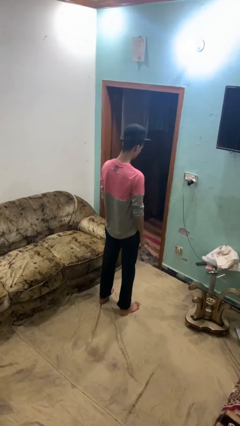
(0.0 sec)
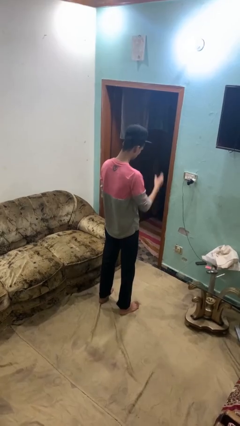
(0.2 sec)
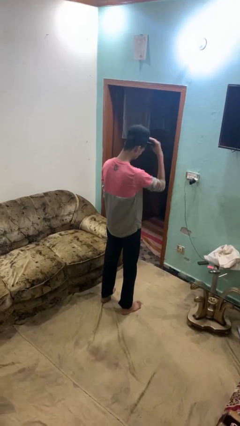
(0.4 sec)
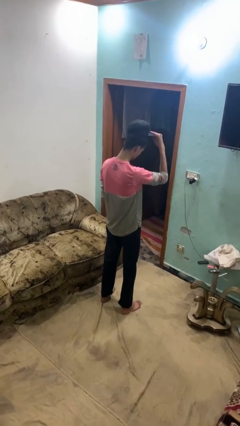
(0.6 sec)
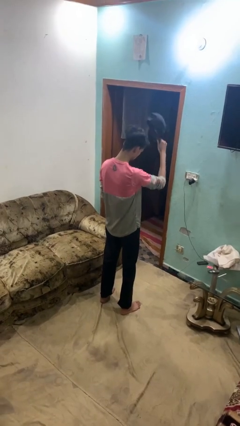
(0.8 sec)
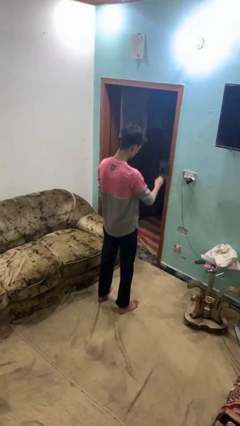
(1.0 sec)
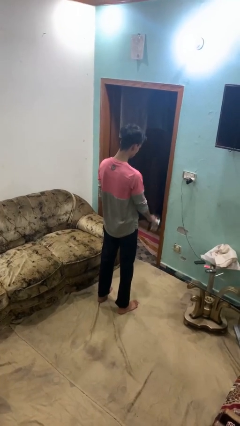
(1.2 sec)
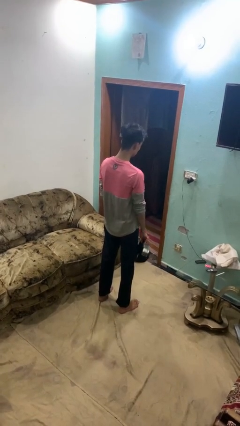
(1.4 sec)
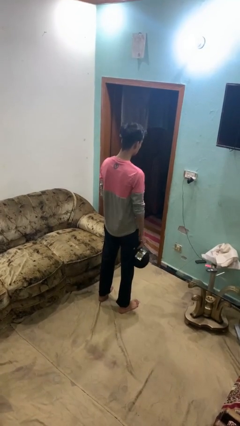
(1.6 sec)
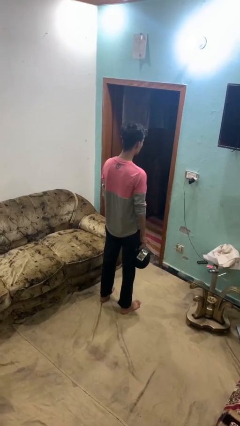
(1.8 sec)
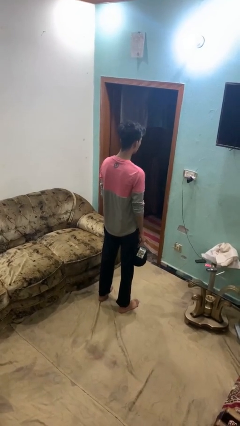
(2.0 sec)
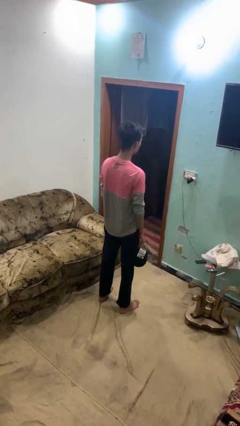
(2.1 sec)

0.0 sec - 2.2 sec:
person takes off hat

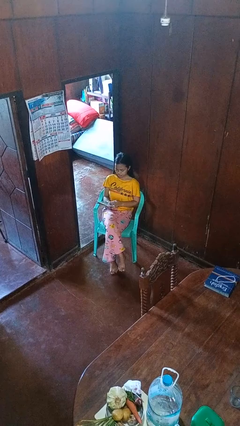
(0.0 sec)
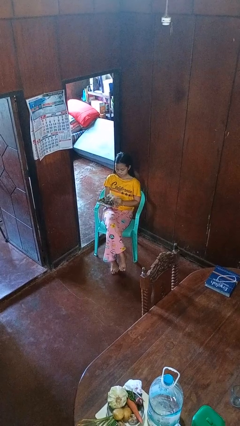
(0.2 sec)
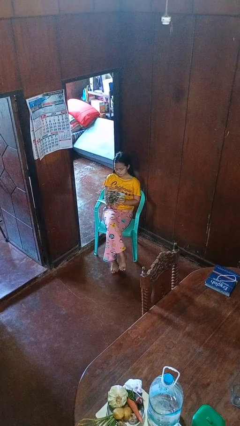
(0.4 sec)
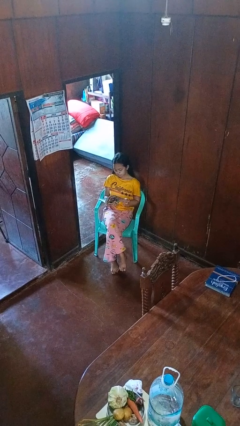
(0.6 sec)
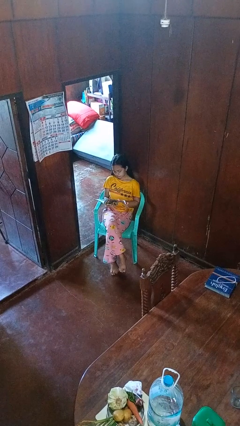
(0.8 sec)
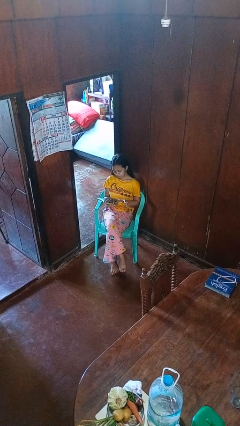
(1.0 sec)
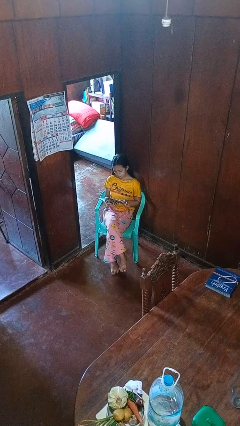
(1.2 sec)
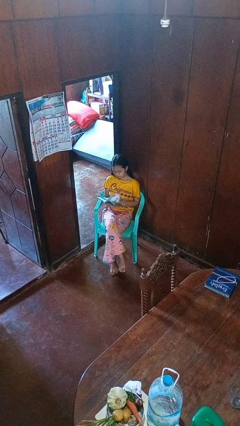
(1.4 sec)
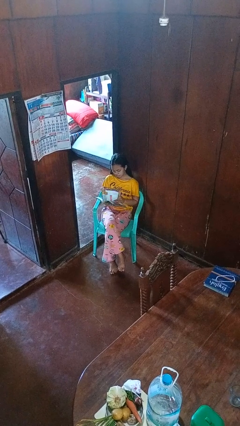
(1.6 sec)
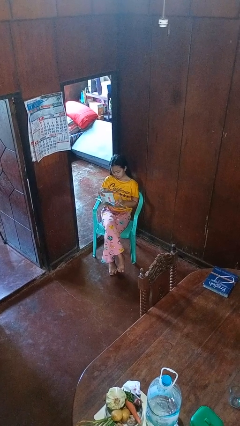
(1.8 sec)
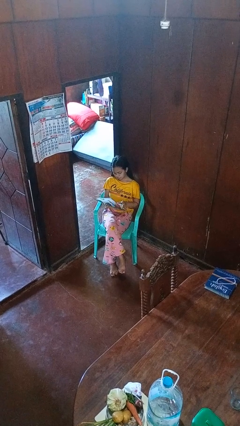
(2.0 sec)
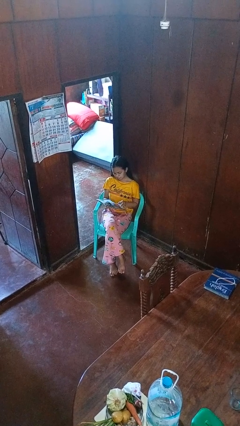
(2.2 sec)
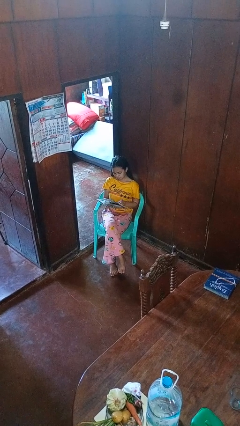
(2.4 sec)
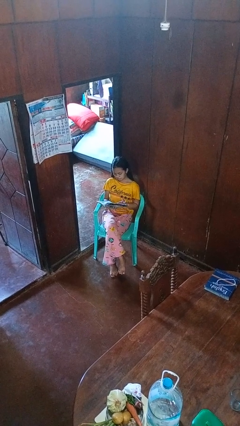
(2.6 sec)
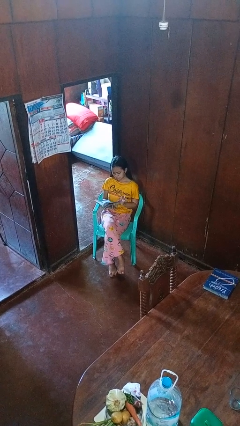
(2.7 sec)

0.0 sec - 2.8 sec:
person reads magazine

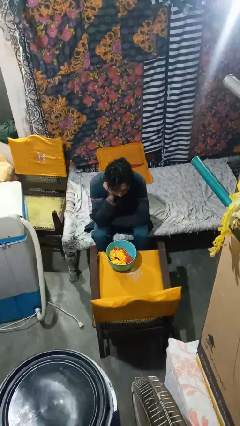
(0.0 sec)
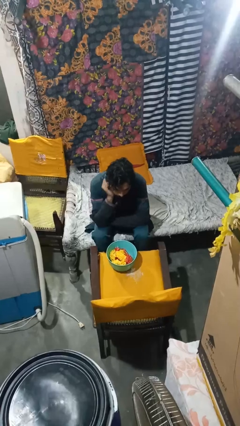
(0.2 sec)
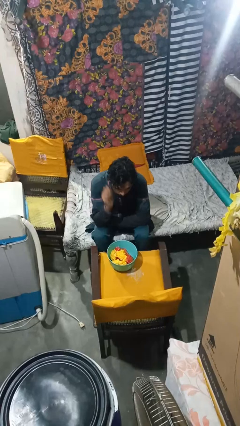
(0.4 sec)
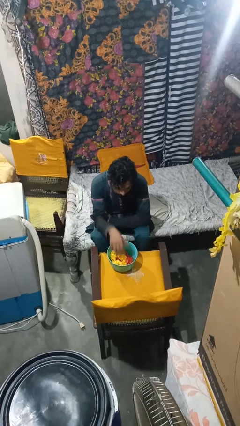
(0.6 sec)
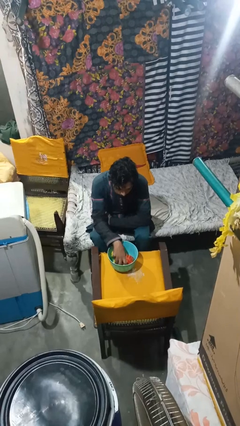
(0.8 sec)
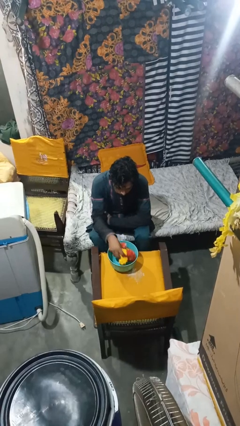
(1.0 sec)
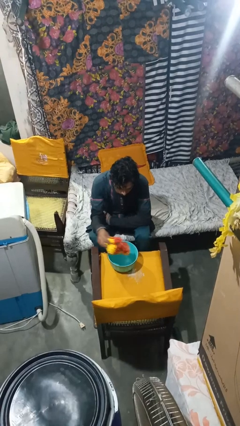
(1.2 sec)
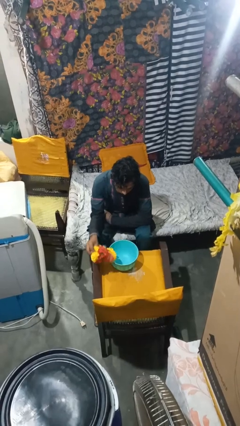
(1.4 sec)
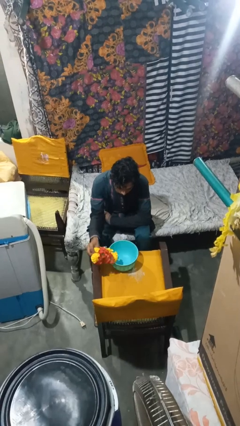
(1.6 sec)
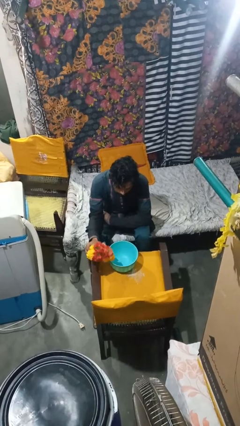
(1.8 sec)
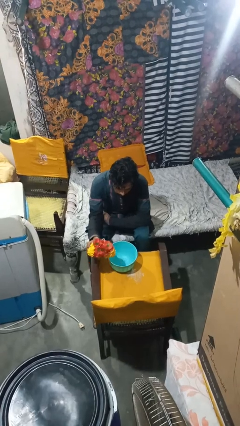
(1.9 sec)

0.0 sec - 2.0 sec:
person pours into bowl

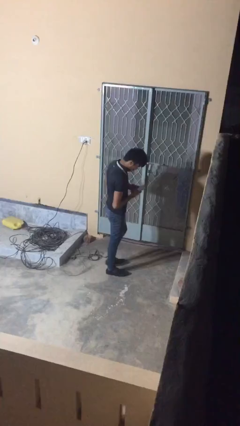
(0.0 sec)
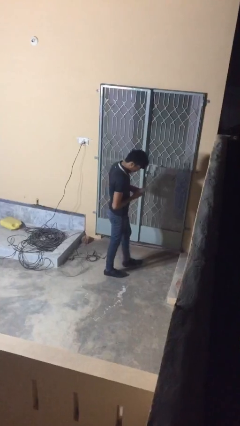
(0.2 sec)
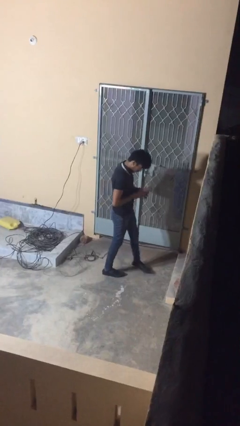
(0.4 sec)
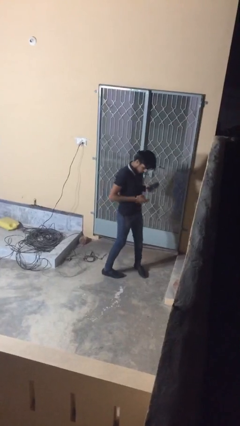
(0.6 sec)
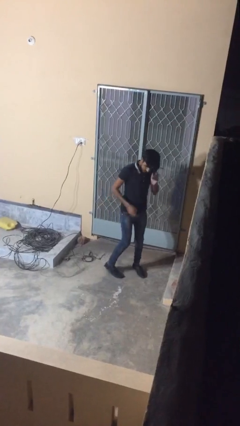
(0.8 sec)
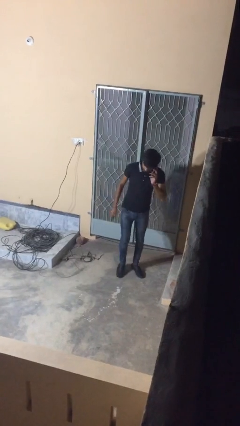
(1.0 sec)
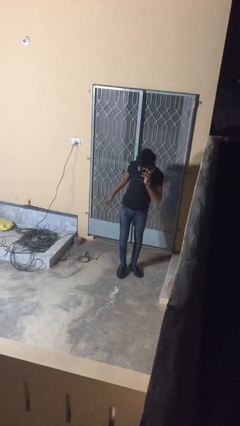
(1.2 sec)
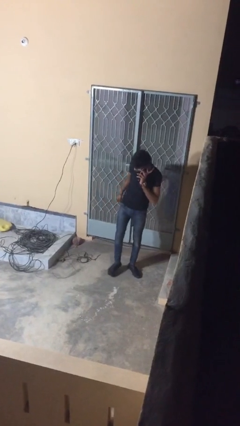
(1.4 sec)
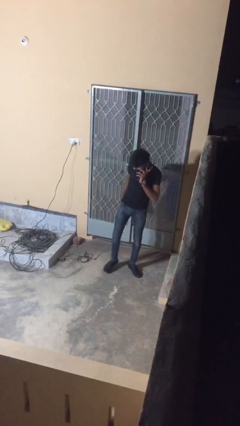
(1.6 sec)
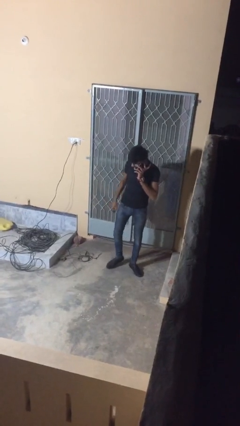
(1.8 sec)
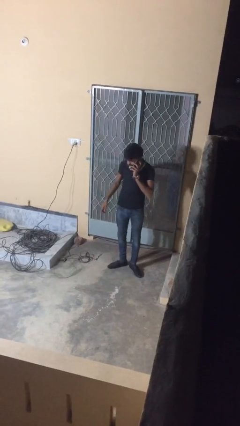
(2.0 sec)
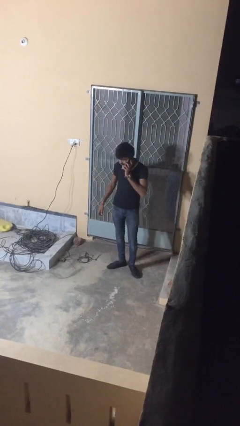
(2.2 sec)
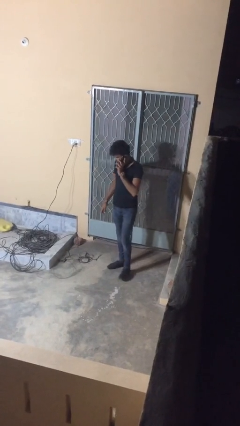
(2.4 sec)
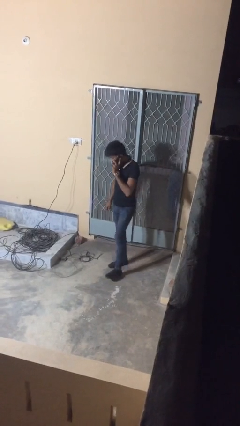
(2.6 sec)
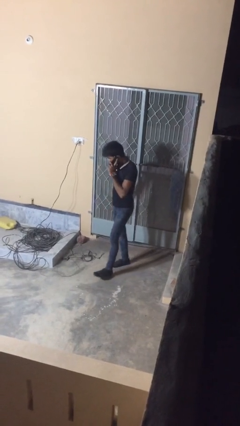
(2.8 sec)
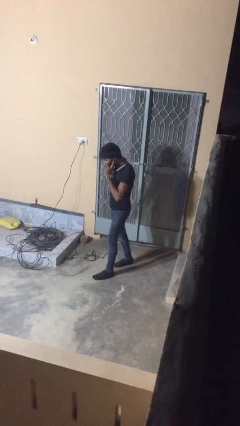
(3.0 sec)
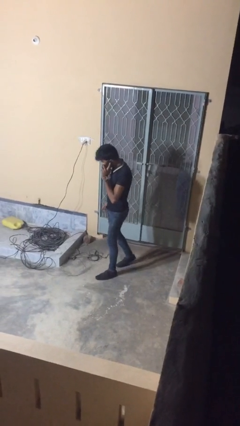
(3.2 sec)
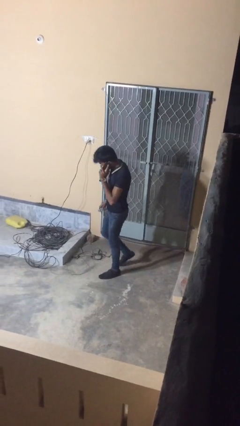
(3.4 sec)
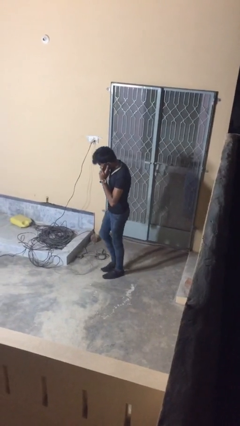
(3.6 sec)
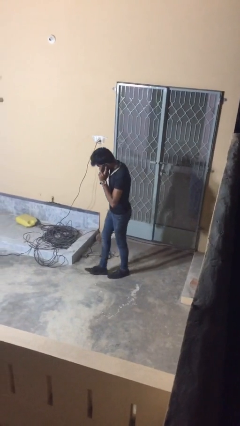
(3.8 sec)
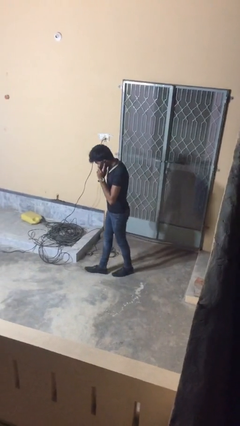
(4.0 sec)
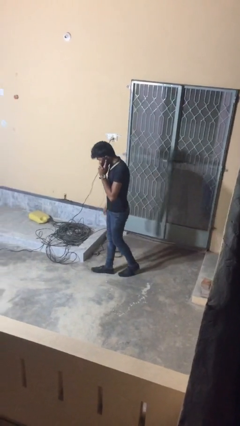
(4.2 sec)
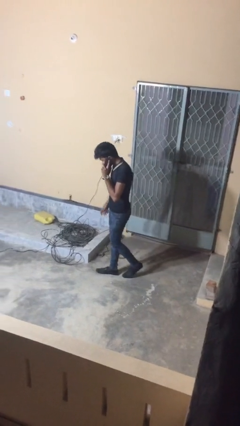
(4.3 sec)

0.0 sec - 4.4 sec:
person talks on phone

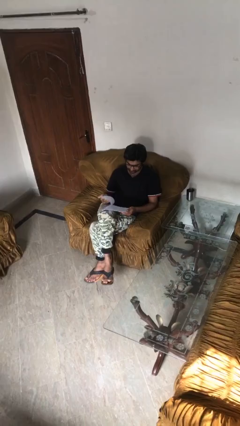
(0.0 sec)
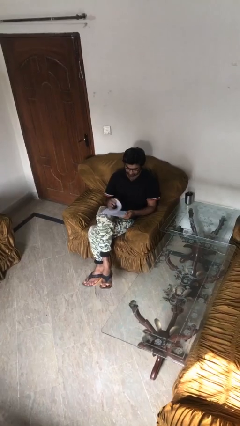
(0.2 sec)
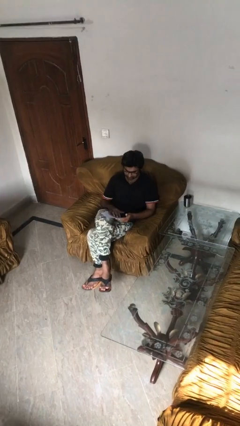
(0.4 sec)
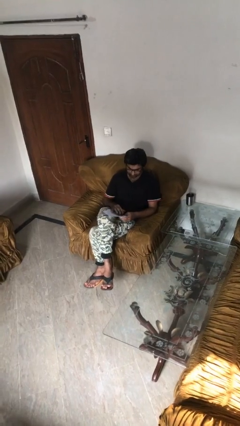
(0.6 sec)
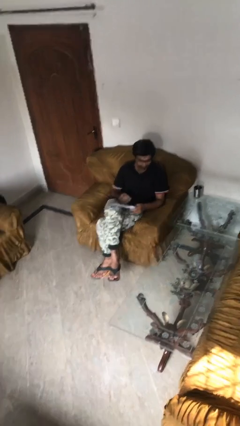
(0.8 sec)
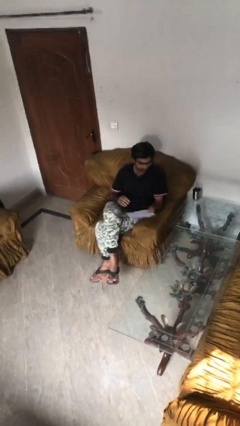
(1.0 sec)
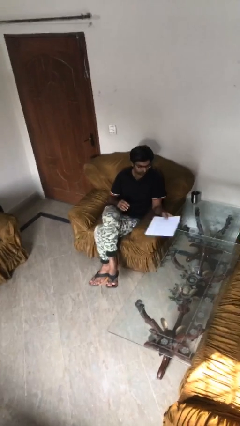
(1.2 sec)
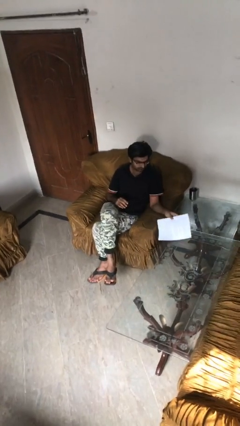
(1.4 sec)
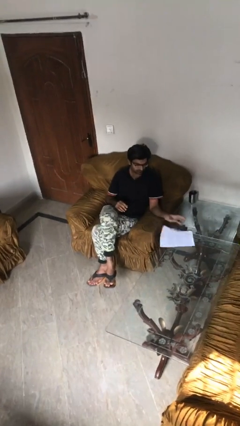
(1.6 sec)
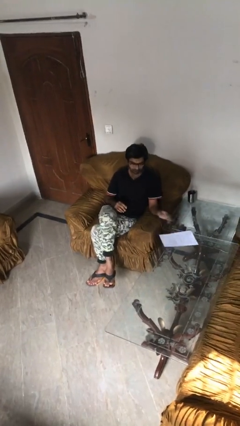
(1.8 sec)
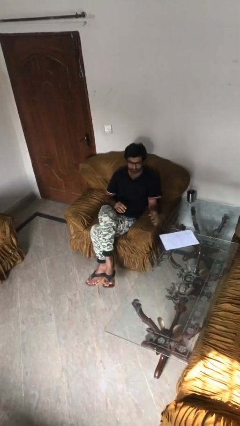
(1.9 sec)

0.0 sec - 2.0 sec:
person puts down object on table

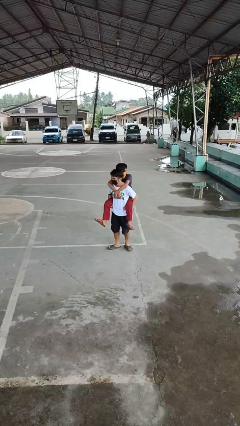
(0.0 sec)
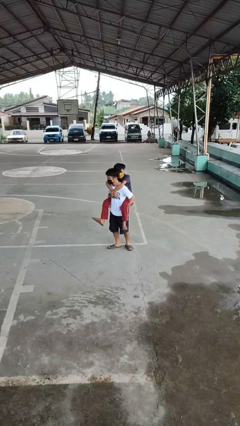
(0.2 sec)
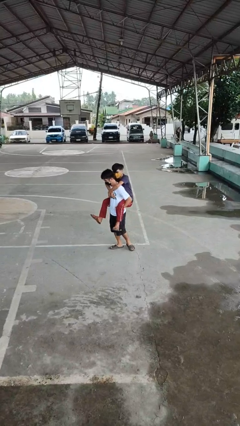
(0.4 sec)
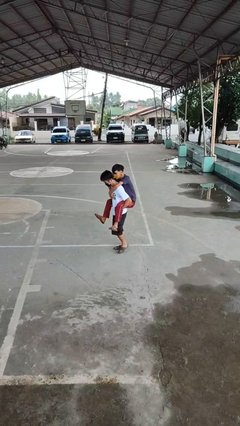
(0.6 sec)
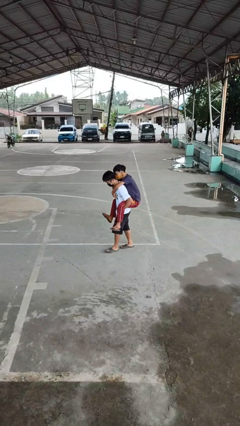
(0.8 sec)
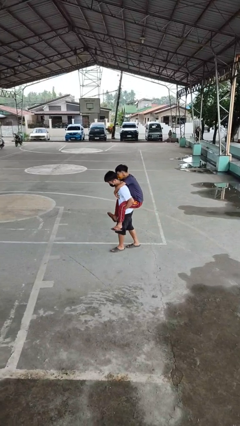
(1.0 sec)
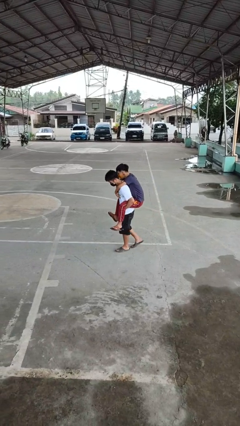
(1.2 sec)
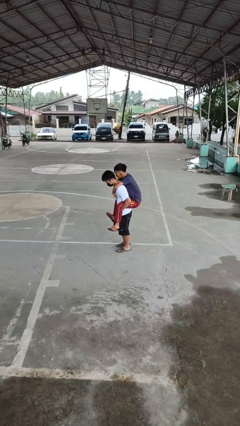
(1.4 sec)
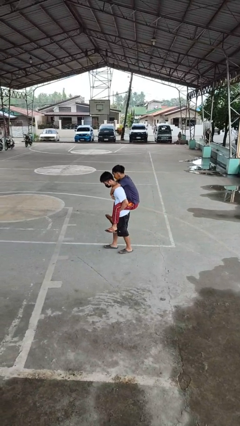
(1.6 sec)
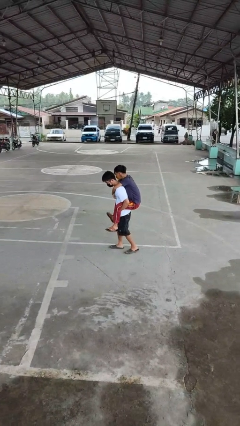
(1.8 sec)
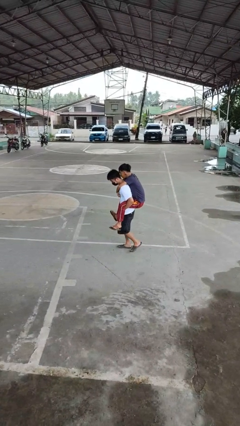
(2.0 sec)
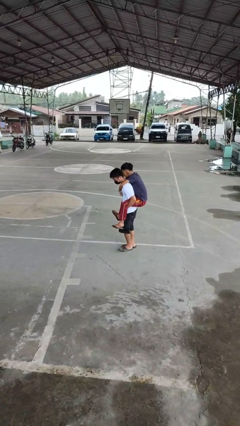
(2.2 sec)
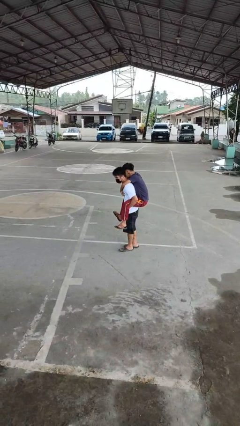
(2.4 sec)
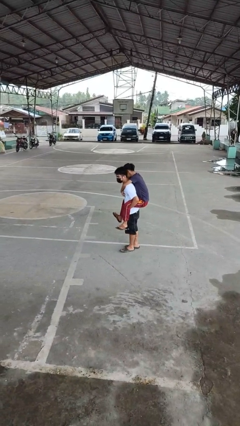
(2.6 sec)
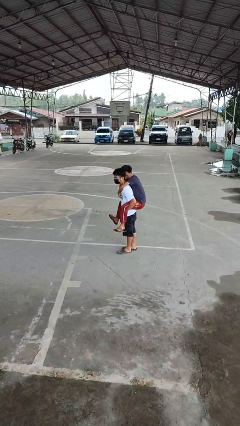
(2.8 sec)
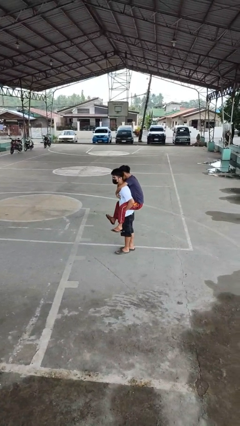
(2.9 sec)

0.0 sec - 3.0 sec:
person carries person on back

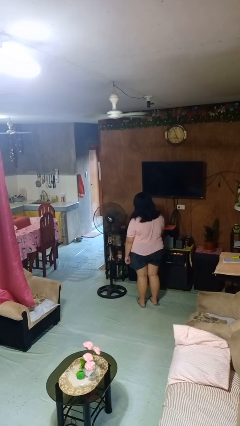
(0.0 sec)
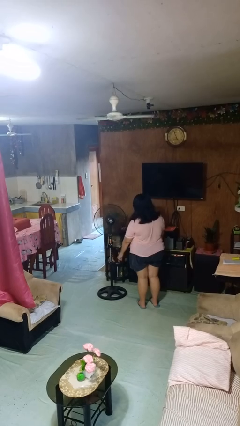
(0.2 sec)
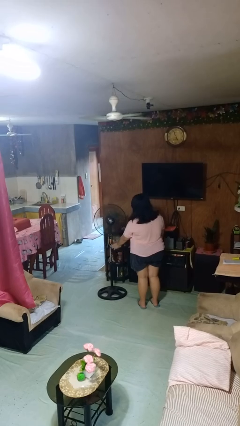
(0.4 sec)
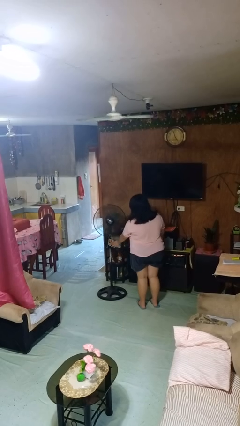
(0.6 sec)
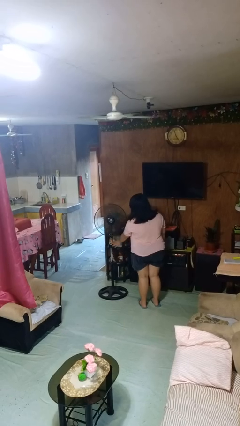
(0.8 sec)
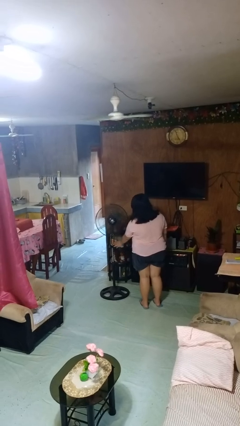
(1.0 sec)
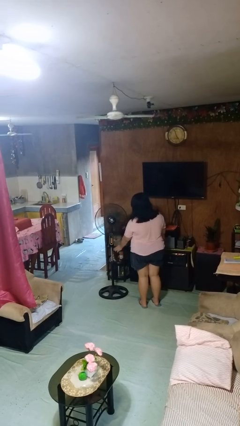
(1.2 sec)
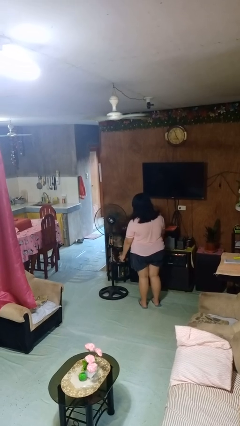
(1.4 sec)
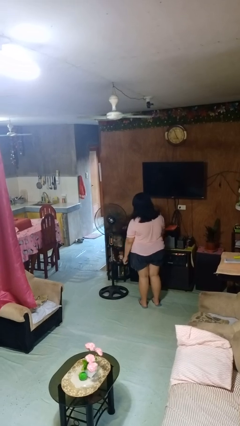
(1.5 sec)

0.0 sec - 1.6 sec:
person turns off fan
